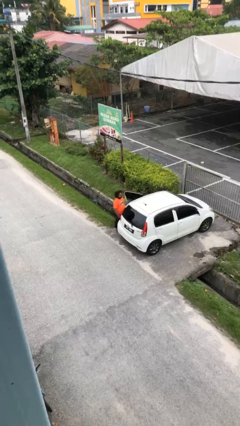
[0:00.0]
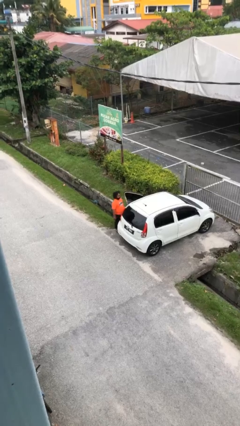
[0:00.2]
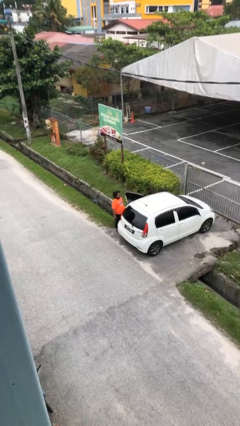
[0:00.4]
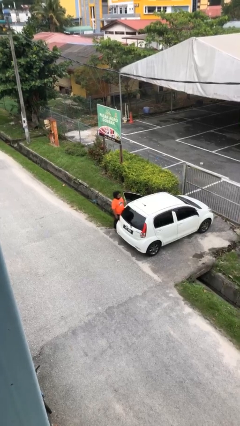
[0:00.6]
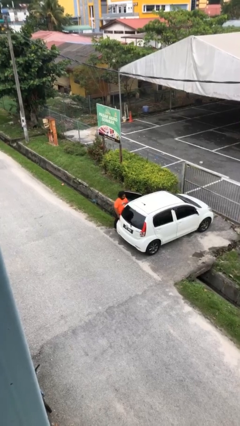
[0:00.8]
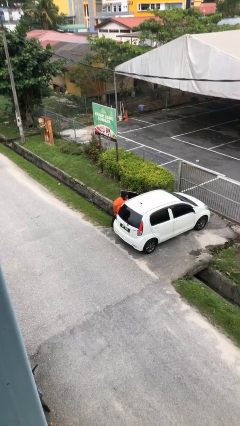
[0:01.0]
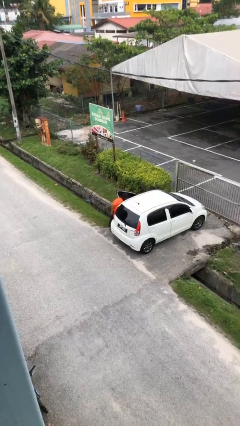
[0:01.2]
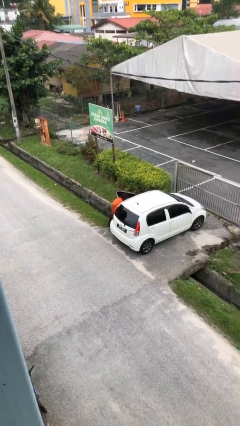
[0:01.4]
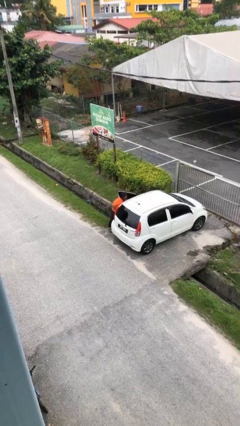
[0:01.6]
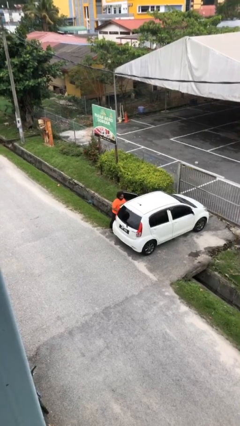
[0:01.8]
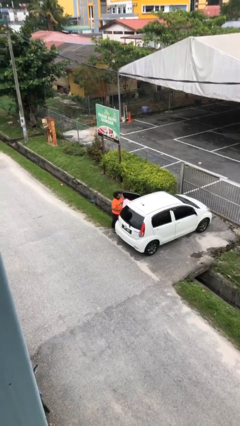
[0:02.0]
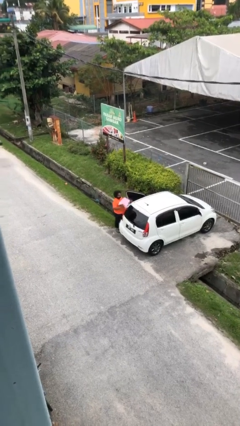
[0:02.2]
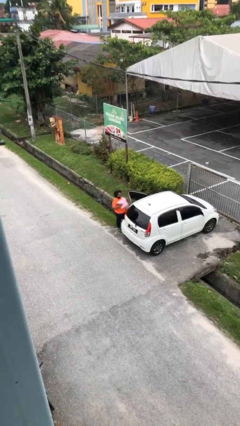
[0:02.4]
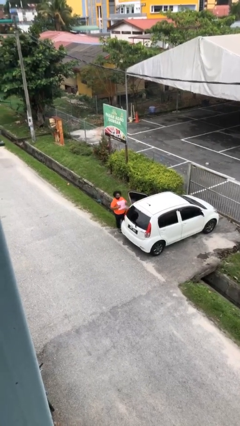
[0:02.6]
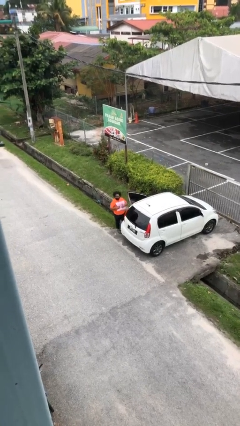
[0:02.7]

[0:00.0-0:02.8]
person unloads car

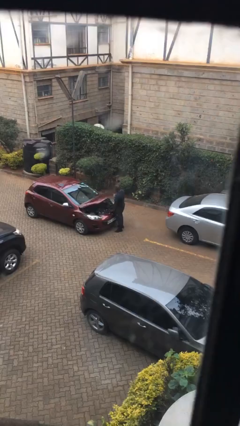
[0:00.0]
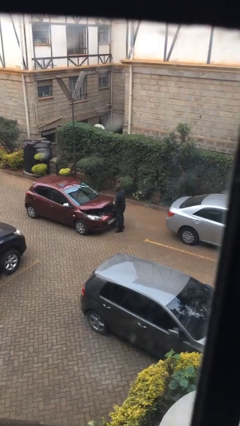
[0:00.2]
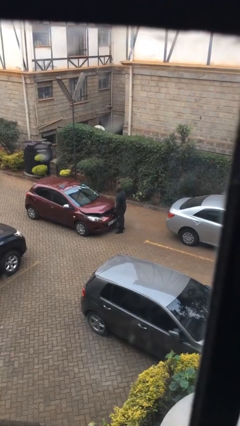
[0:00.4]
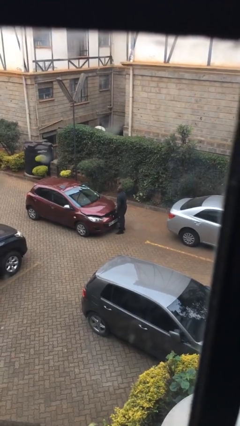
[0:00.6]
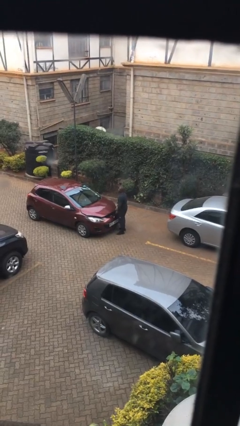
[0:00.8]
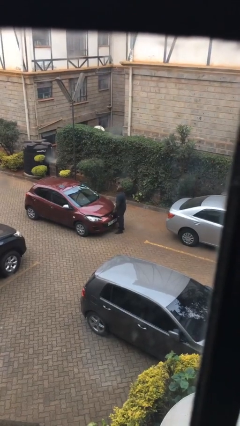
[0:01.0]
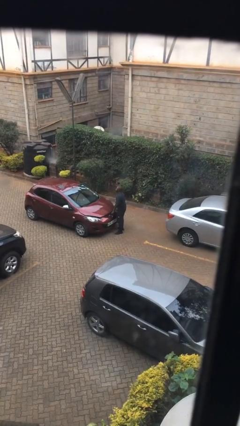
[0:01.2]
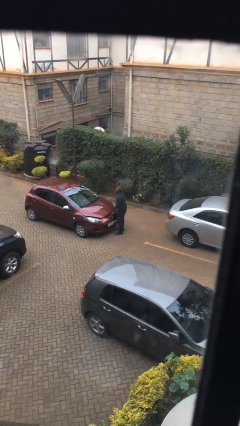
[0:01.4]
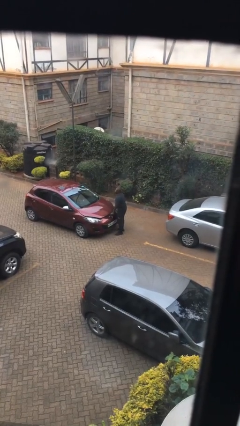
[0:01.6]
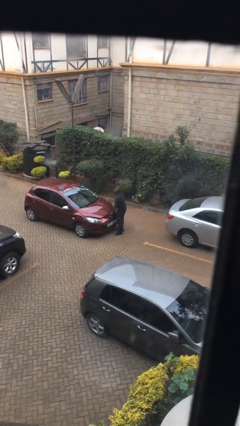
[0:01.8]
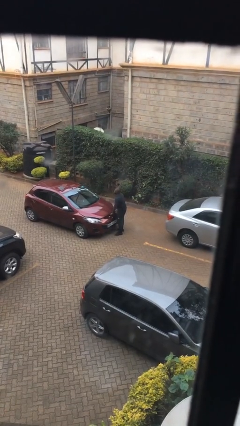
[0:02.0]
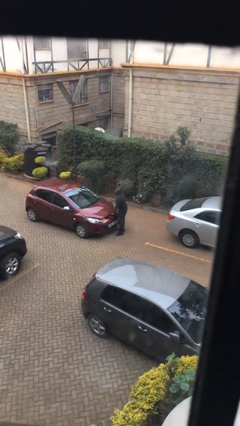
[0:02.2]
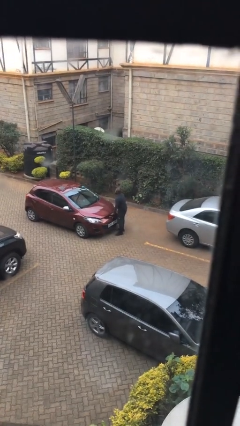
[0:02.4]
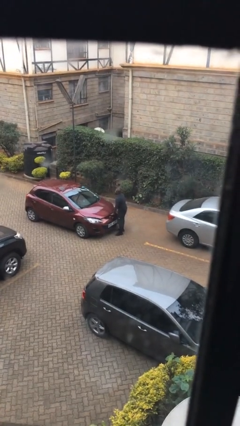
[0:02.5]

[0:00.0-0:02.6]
person closes car hood

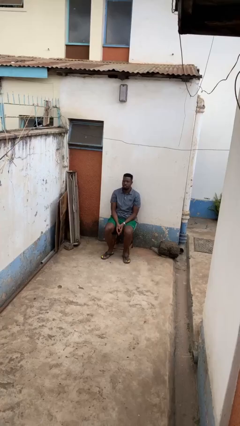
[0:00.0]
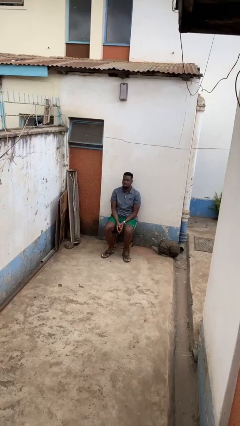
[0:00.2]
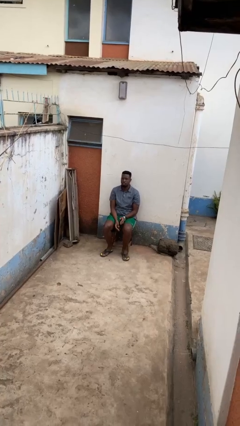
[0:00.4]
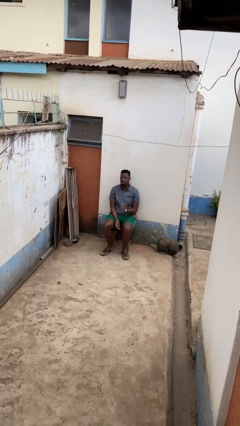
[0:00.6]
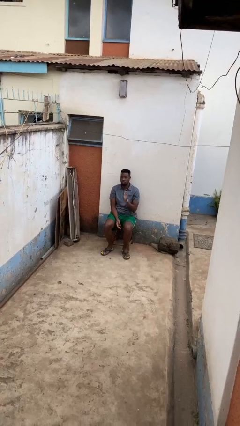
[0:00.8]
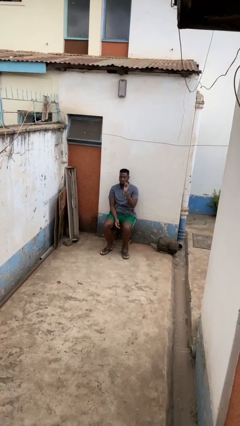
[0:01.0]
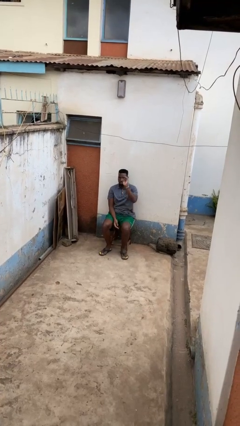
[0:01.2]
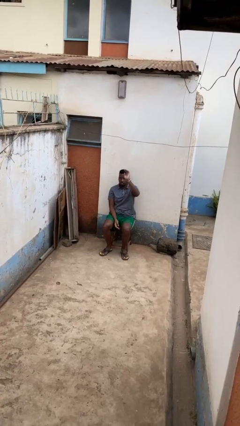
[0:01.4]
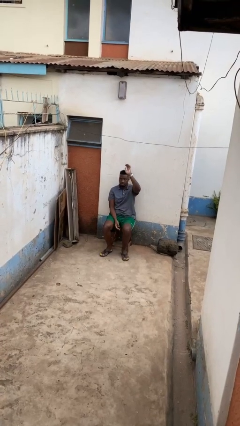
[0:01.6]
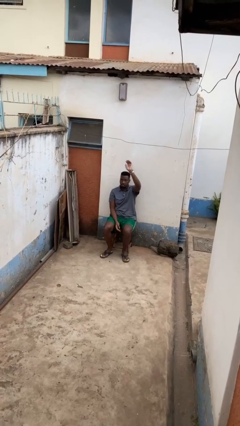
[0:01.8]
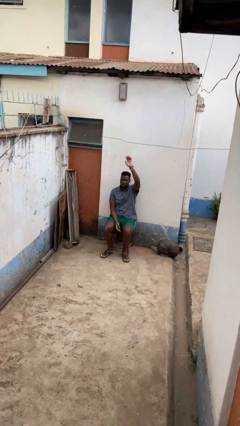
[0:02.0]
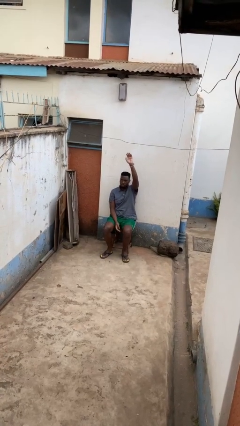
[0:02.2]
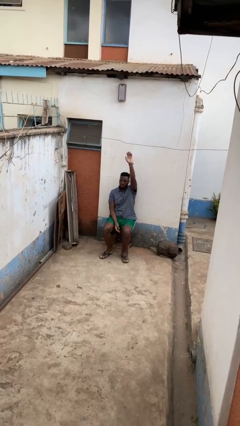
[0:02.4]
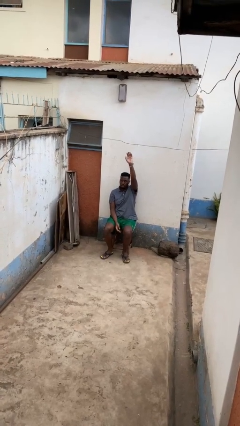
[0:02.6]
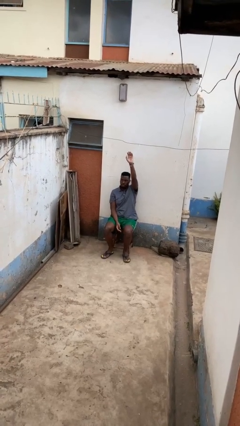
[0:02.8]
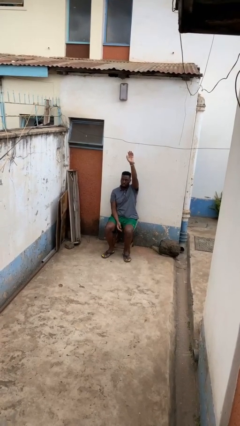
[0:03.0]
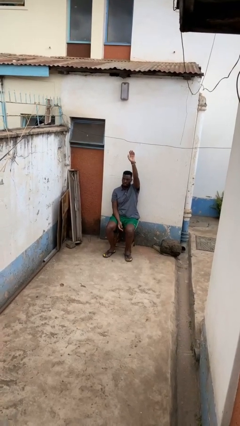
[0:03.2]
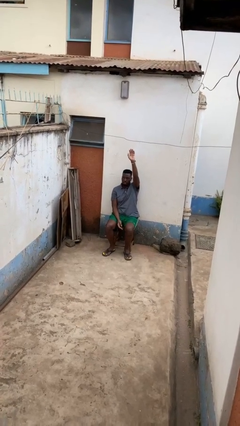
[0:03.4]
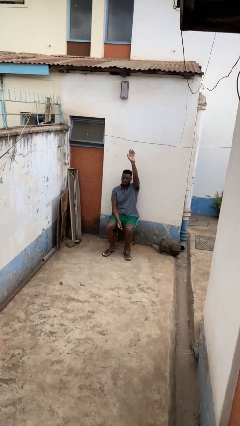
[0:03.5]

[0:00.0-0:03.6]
person gestures raise hand

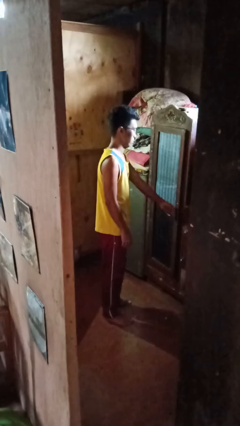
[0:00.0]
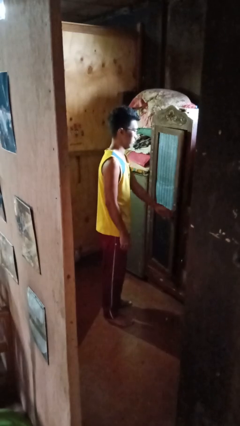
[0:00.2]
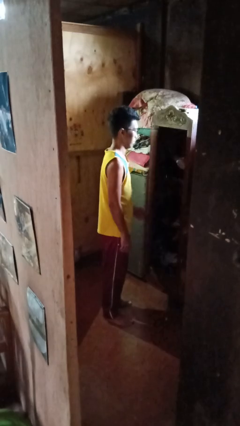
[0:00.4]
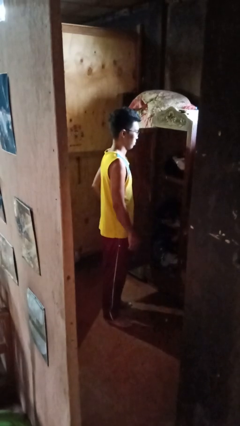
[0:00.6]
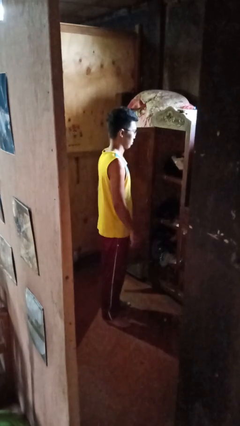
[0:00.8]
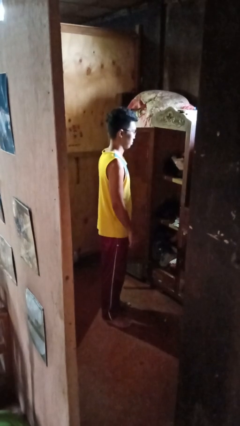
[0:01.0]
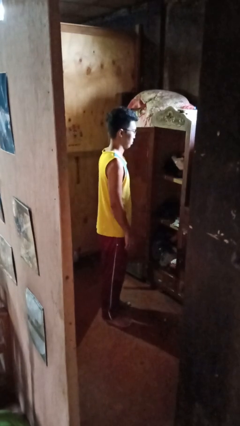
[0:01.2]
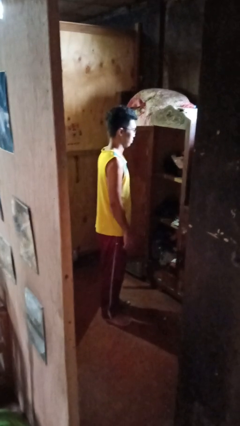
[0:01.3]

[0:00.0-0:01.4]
person opens closet door

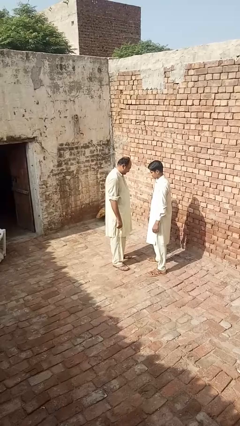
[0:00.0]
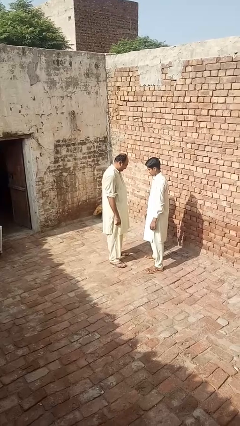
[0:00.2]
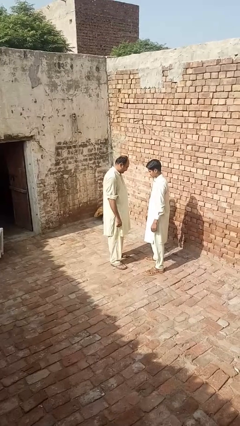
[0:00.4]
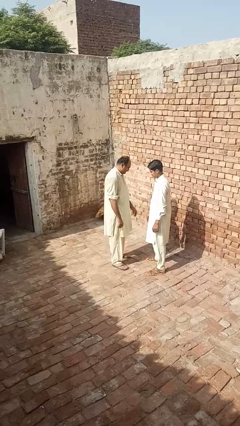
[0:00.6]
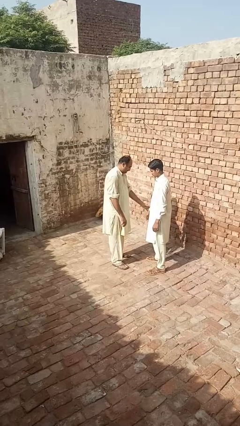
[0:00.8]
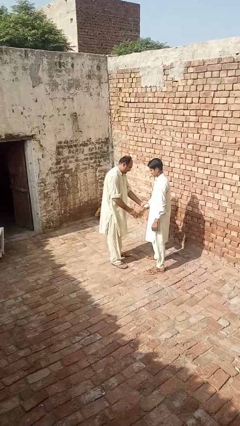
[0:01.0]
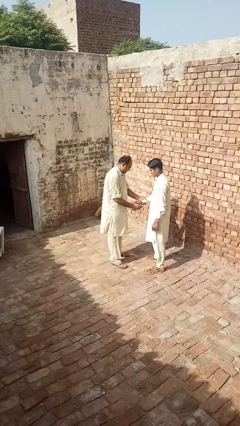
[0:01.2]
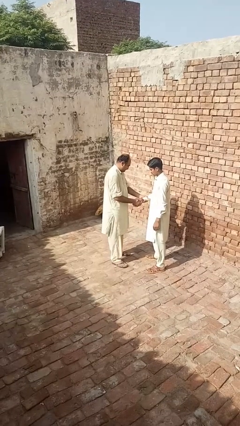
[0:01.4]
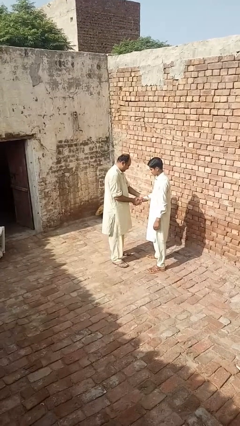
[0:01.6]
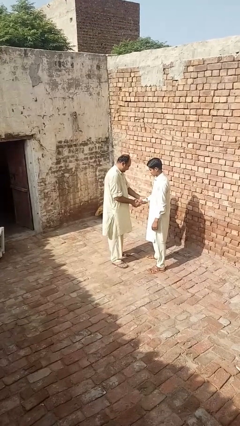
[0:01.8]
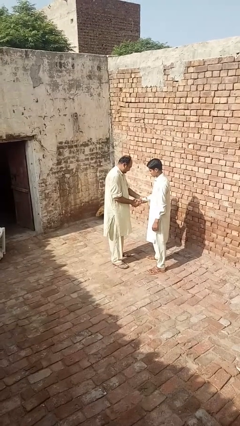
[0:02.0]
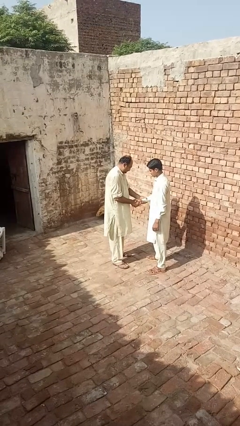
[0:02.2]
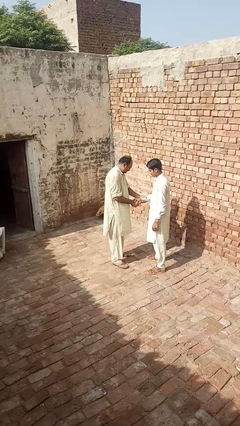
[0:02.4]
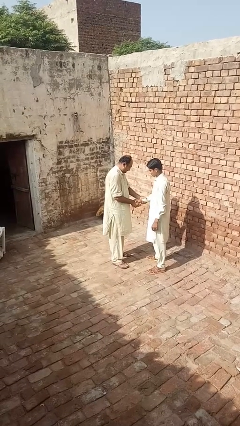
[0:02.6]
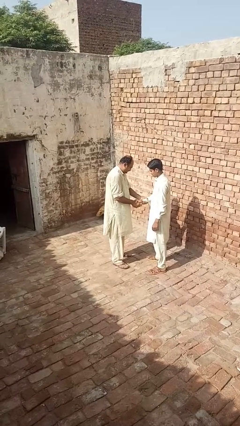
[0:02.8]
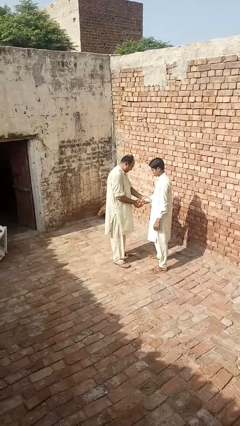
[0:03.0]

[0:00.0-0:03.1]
person grabs person by forearm

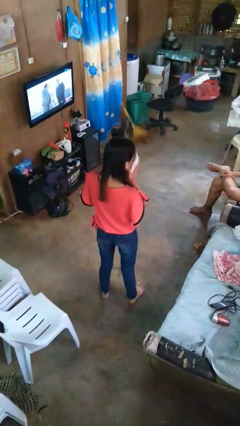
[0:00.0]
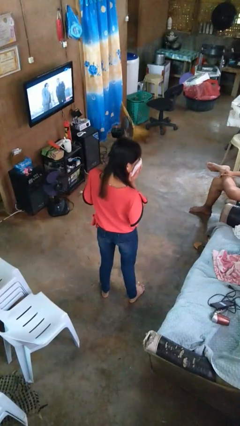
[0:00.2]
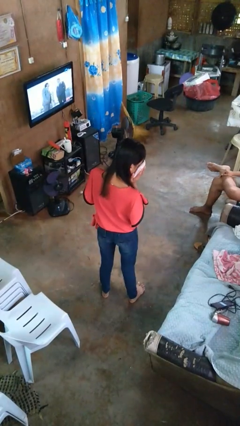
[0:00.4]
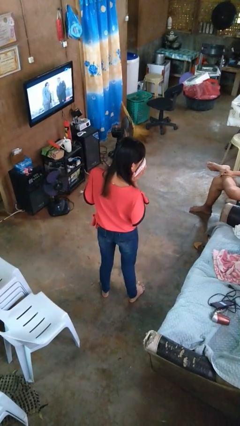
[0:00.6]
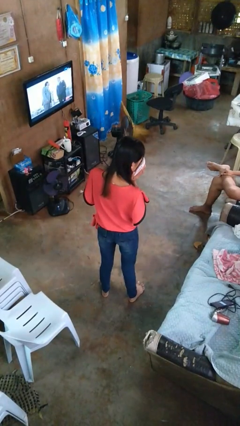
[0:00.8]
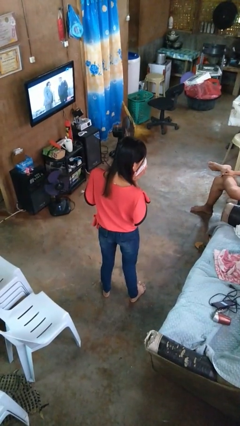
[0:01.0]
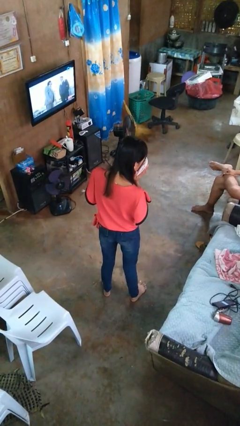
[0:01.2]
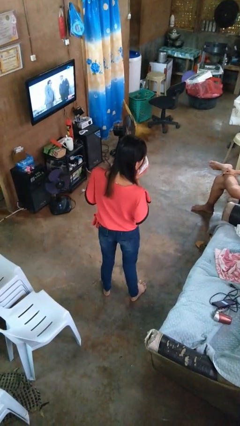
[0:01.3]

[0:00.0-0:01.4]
person blows nose

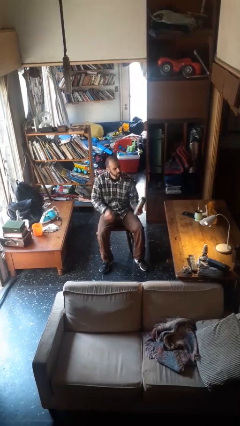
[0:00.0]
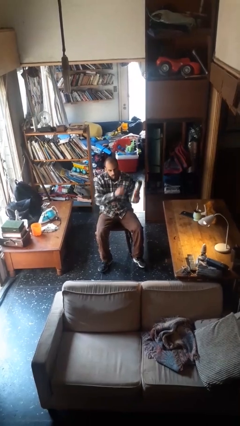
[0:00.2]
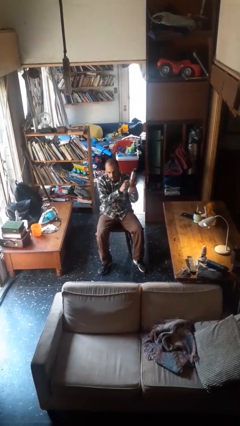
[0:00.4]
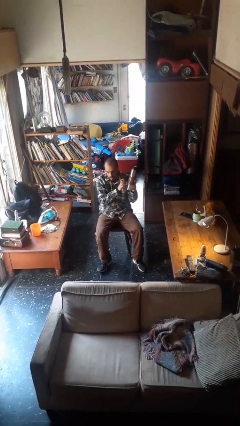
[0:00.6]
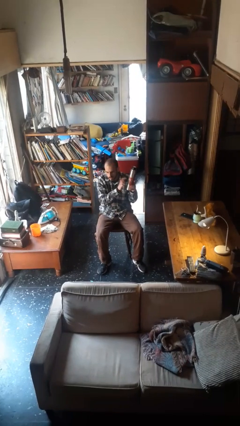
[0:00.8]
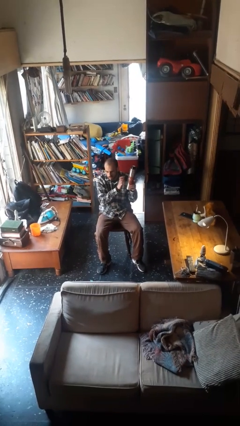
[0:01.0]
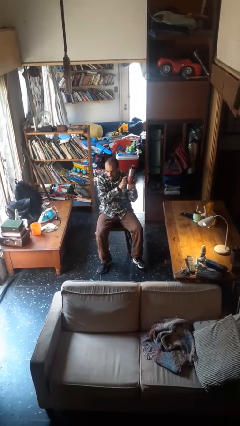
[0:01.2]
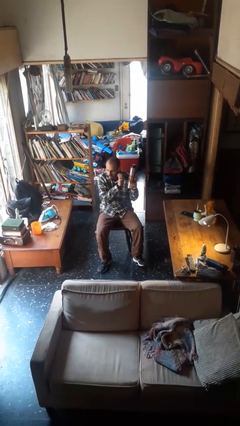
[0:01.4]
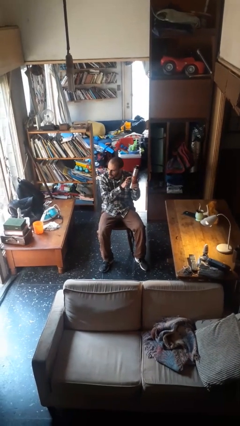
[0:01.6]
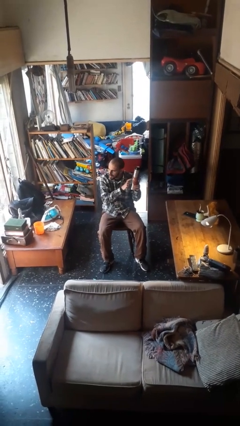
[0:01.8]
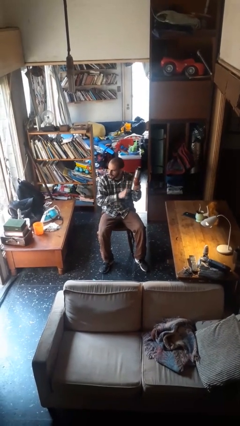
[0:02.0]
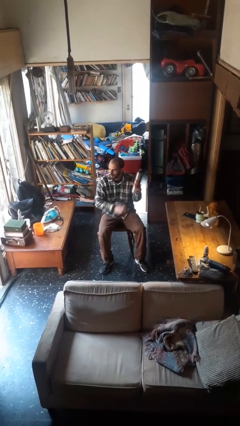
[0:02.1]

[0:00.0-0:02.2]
person taps object with finger
